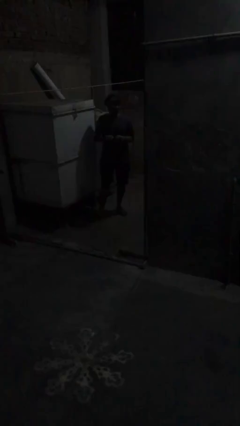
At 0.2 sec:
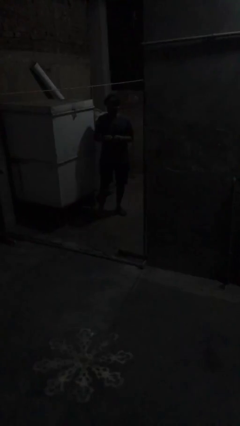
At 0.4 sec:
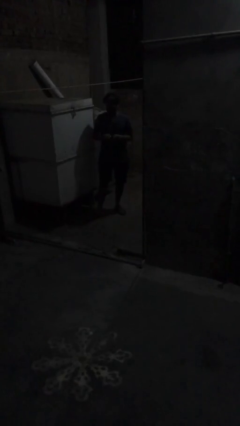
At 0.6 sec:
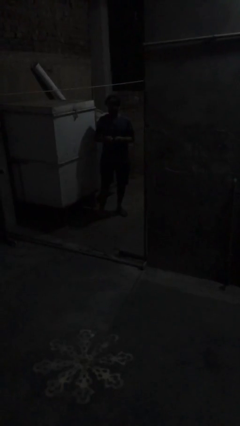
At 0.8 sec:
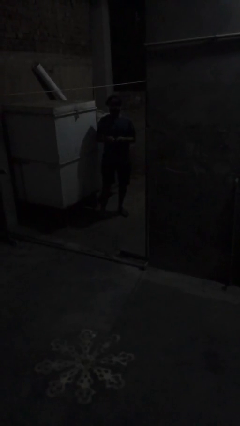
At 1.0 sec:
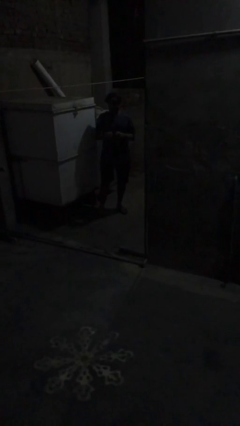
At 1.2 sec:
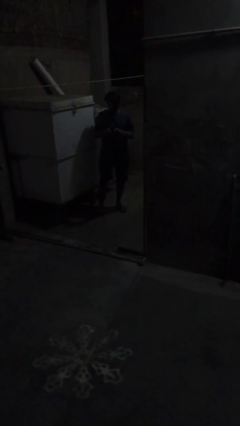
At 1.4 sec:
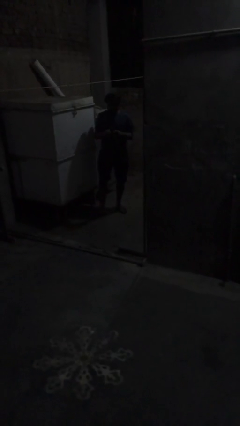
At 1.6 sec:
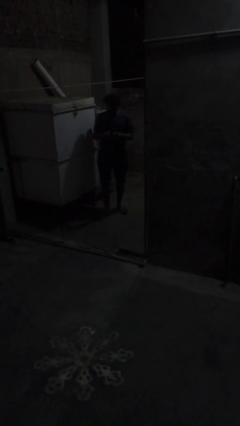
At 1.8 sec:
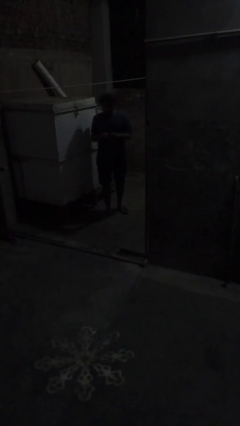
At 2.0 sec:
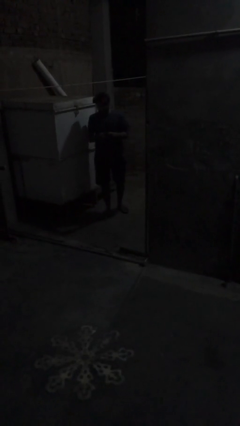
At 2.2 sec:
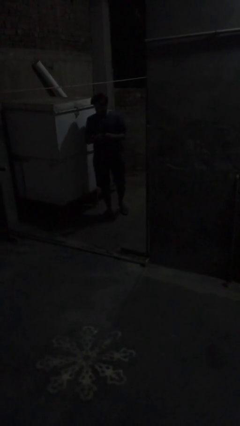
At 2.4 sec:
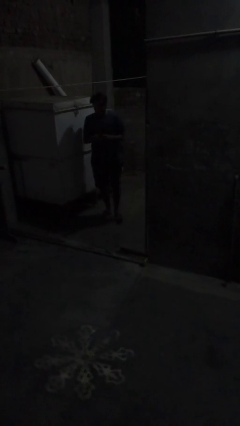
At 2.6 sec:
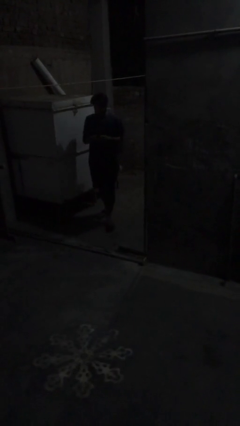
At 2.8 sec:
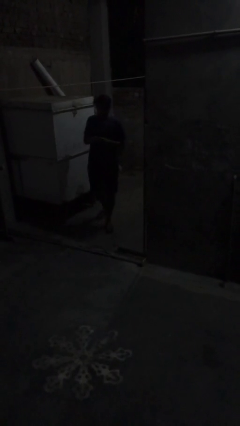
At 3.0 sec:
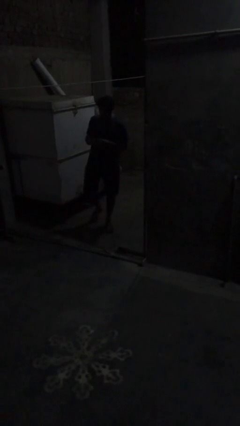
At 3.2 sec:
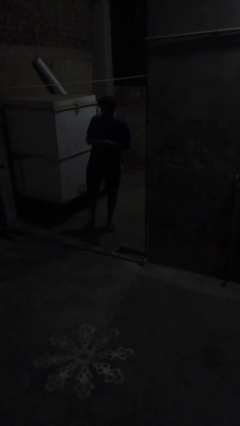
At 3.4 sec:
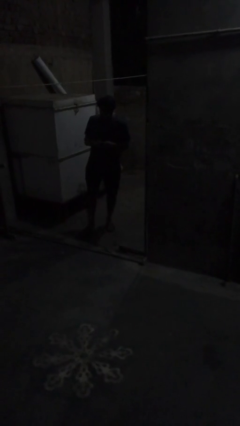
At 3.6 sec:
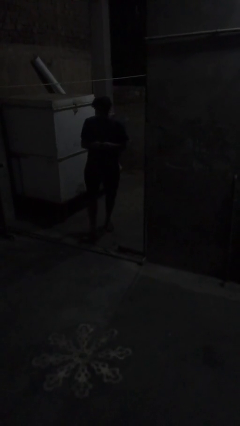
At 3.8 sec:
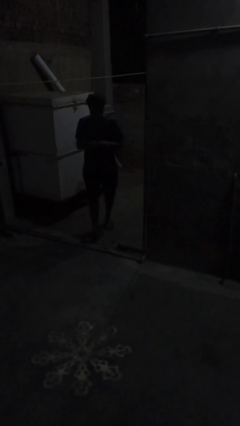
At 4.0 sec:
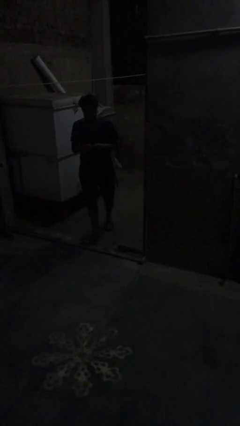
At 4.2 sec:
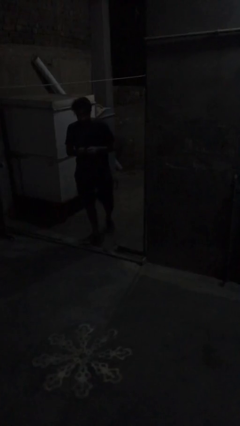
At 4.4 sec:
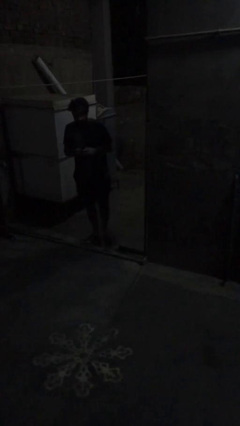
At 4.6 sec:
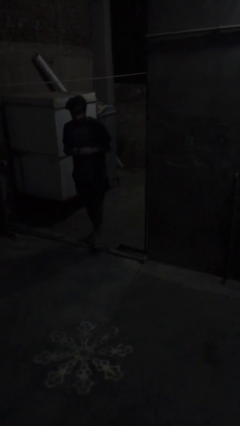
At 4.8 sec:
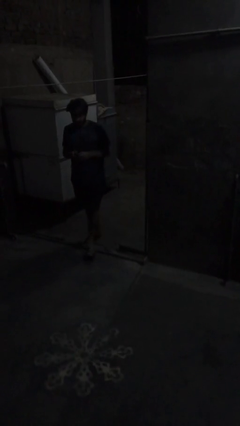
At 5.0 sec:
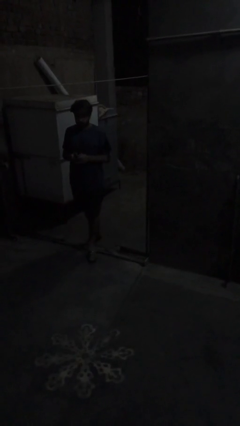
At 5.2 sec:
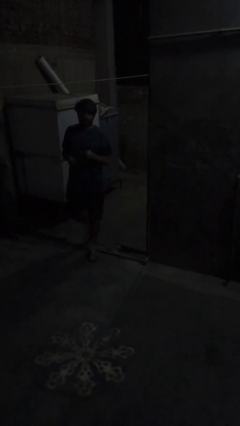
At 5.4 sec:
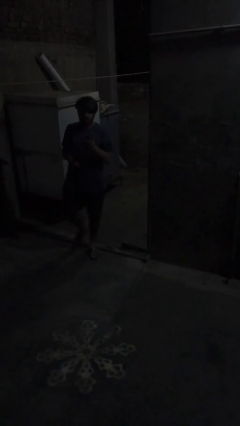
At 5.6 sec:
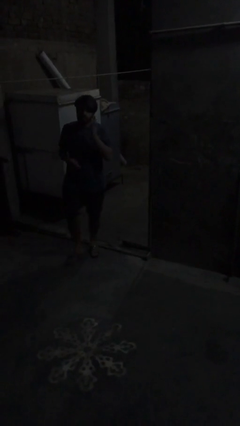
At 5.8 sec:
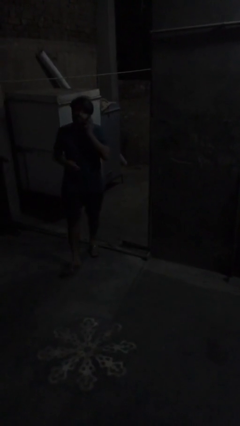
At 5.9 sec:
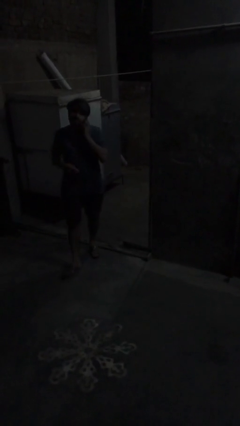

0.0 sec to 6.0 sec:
person texts on phone

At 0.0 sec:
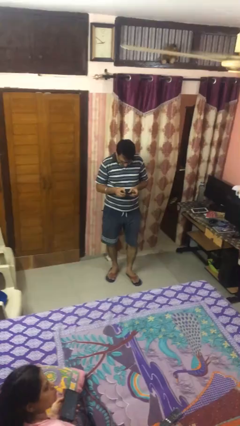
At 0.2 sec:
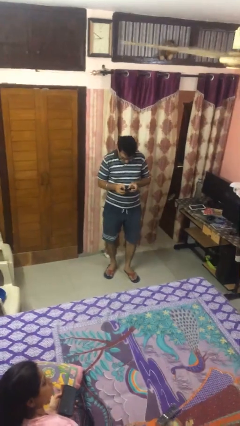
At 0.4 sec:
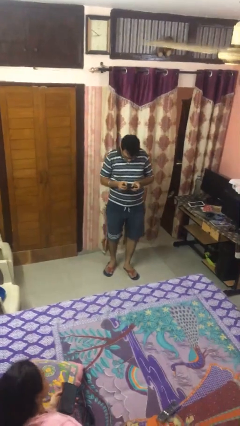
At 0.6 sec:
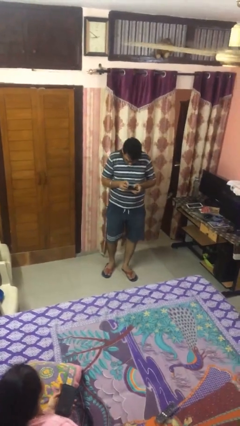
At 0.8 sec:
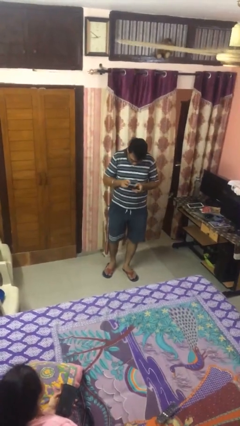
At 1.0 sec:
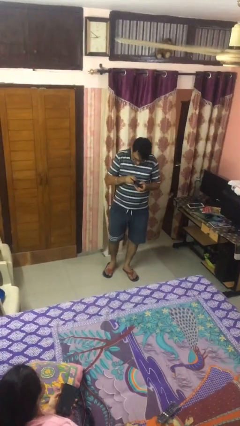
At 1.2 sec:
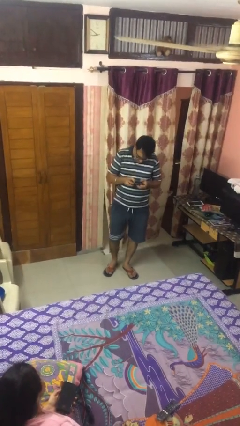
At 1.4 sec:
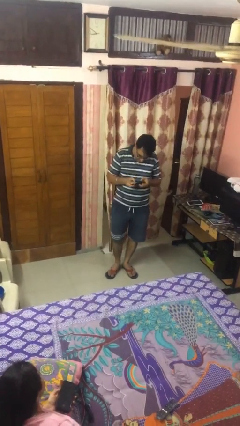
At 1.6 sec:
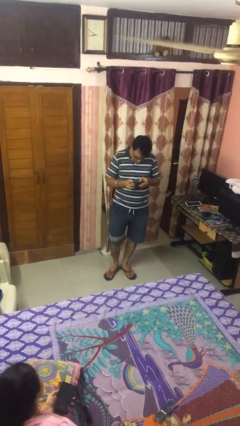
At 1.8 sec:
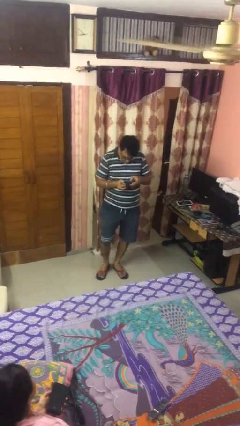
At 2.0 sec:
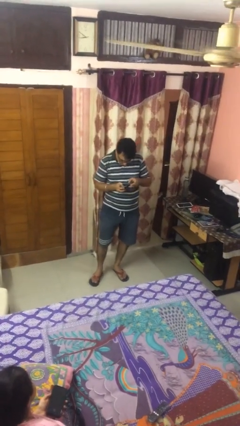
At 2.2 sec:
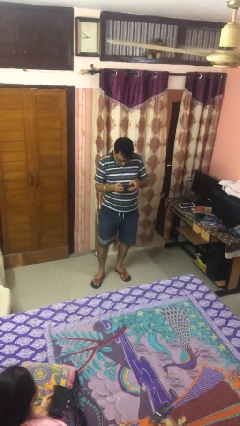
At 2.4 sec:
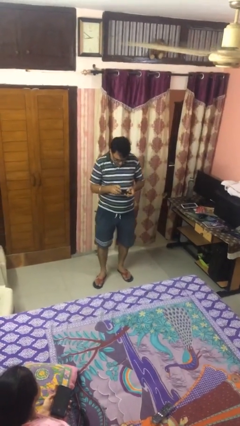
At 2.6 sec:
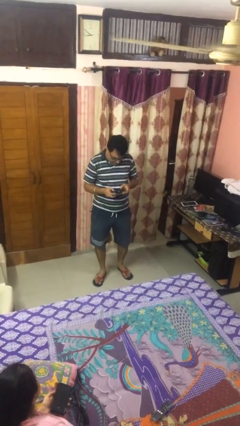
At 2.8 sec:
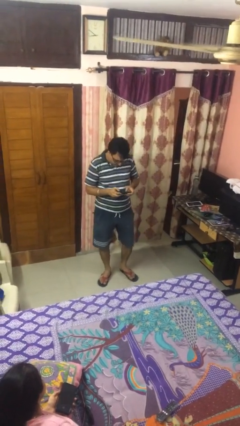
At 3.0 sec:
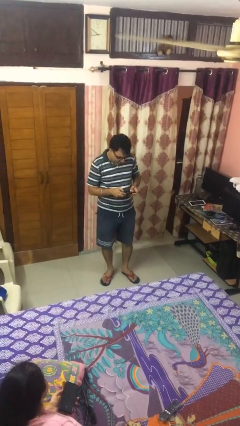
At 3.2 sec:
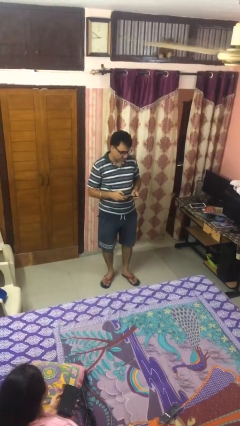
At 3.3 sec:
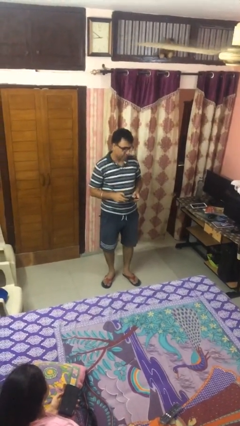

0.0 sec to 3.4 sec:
person interacts with handheld game

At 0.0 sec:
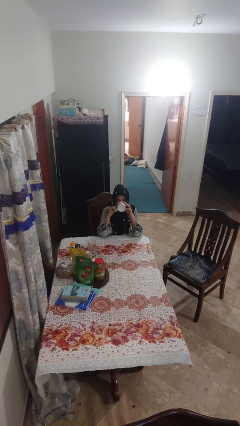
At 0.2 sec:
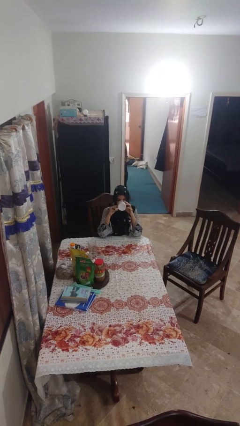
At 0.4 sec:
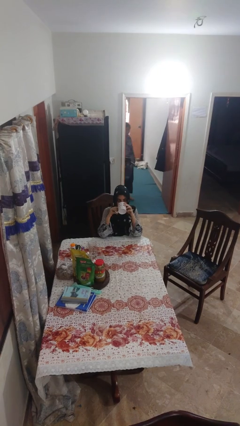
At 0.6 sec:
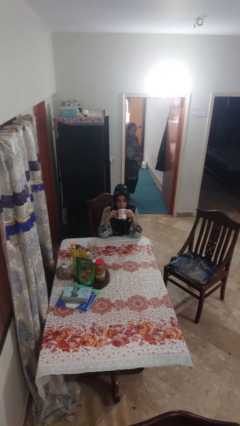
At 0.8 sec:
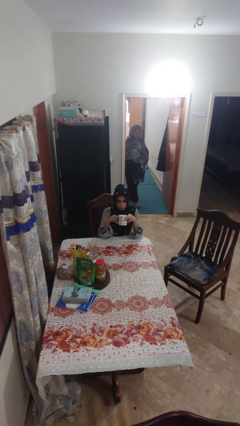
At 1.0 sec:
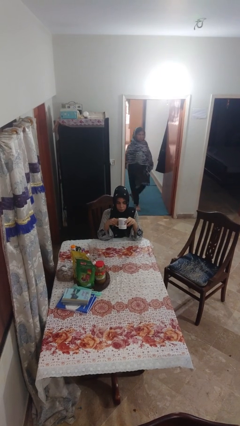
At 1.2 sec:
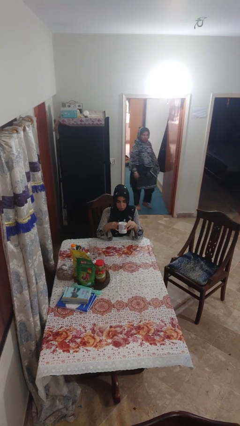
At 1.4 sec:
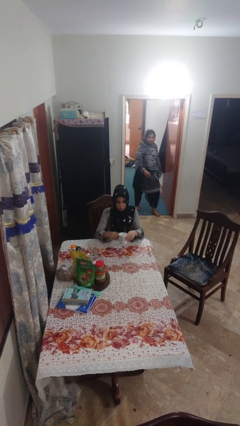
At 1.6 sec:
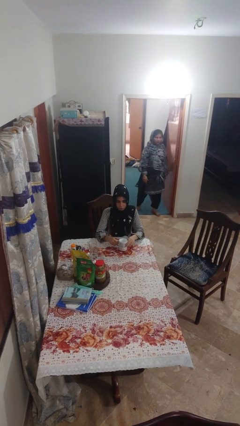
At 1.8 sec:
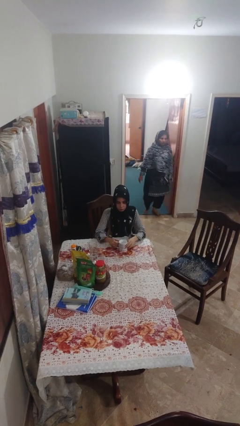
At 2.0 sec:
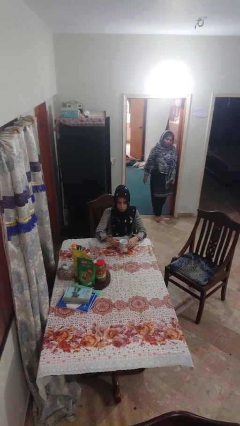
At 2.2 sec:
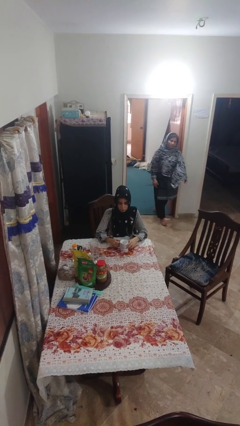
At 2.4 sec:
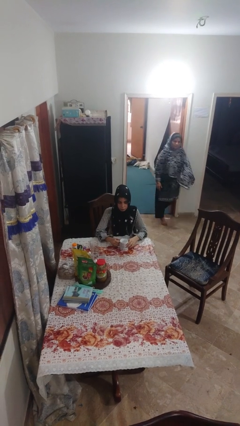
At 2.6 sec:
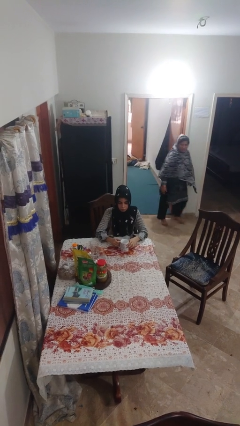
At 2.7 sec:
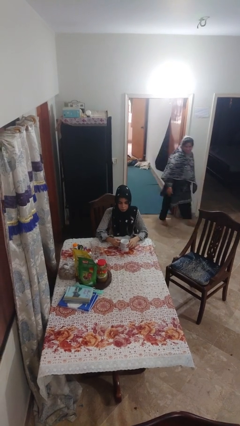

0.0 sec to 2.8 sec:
person puts down object on table

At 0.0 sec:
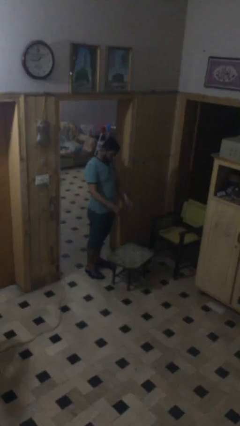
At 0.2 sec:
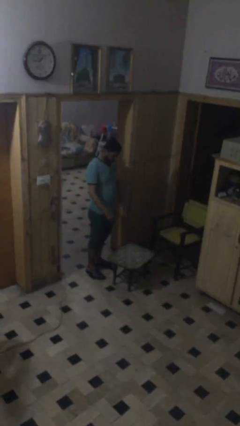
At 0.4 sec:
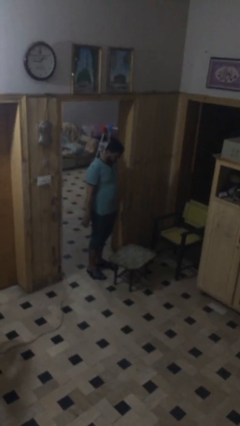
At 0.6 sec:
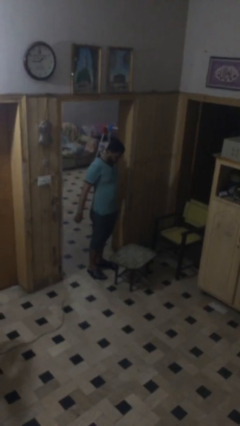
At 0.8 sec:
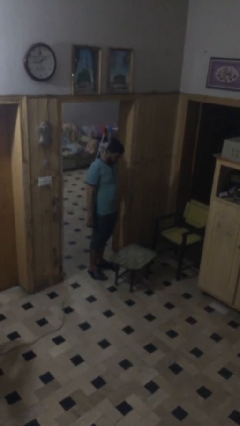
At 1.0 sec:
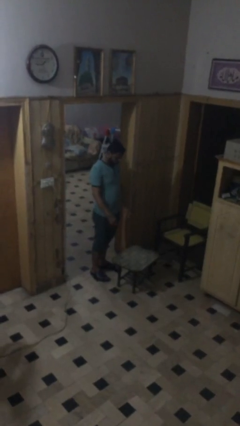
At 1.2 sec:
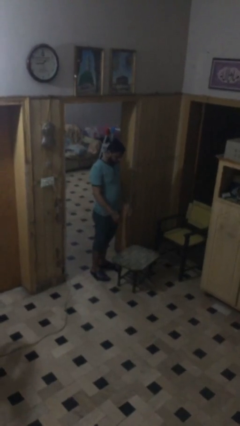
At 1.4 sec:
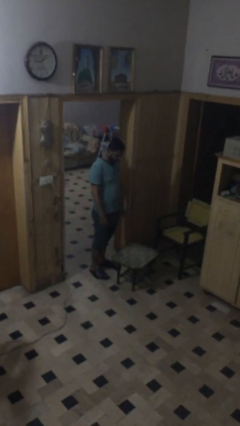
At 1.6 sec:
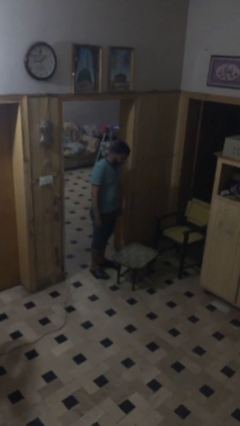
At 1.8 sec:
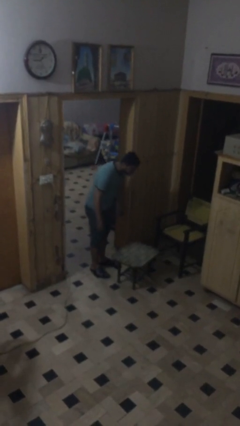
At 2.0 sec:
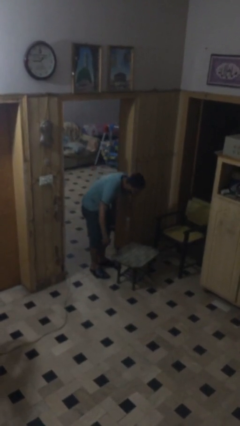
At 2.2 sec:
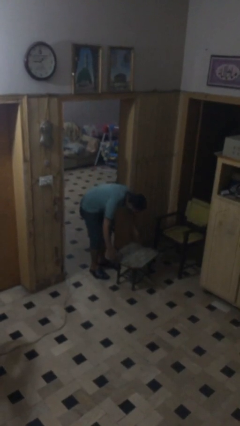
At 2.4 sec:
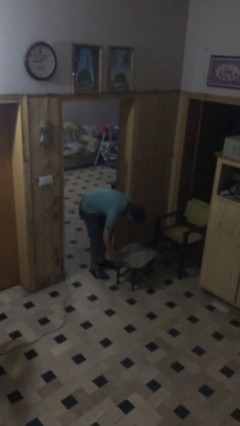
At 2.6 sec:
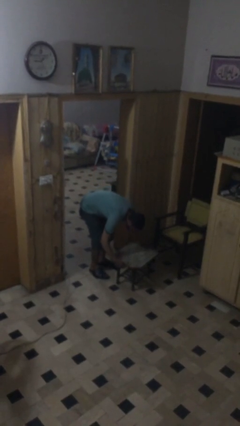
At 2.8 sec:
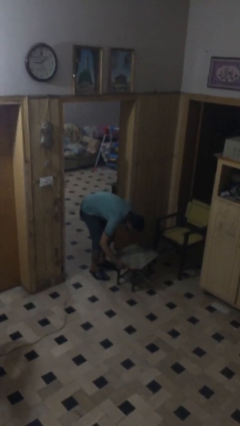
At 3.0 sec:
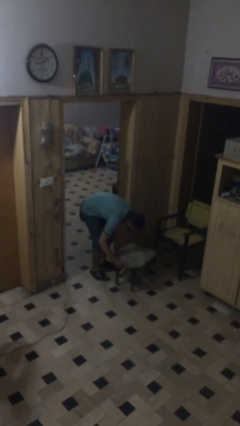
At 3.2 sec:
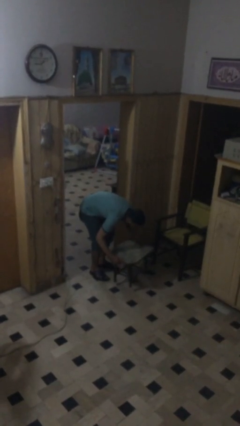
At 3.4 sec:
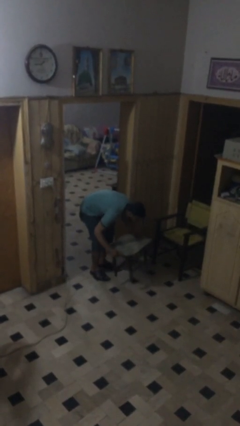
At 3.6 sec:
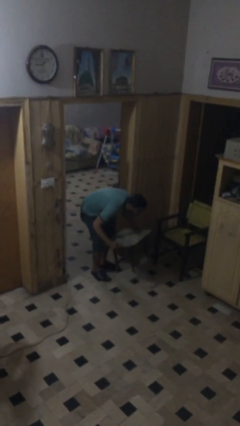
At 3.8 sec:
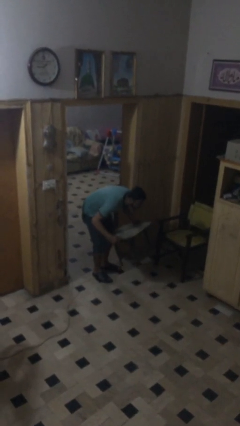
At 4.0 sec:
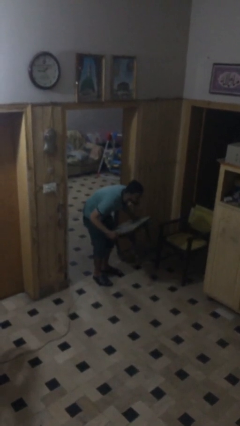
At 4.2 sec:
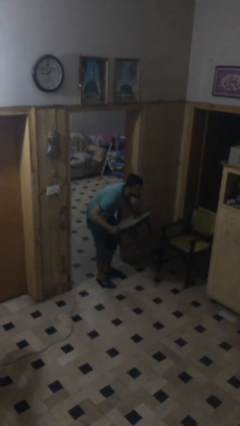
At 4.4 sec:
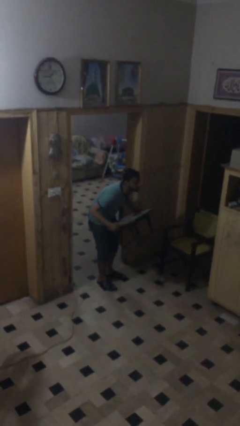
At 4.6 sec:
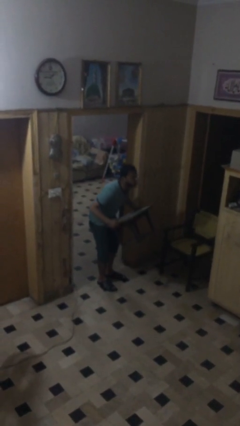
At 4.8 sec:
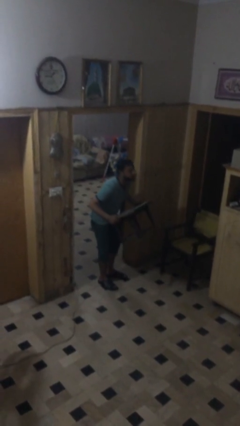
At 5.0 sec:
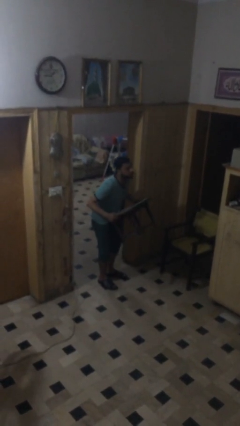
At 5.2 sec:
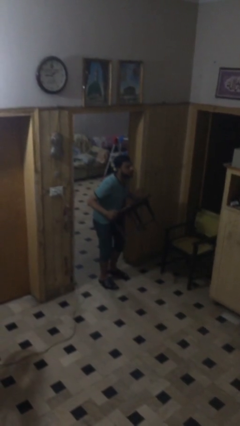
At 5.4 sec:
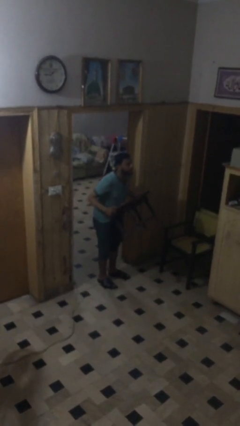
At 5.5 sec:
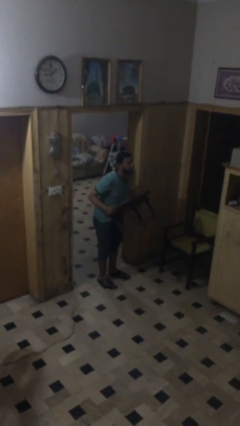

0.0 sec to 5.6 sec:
person picks up object from floor
